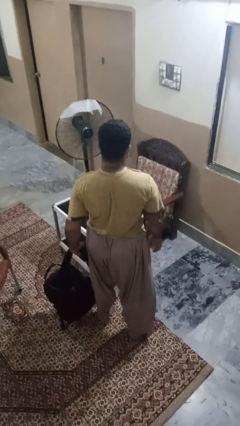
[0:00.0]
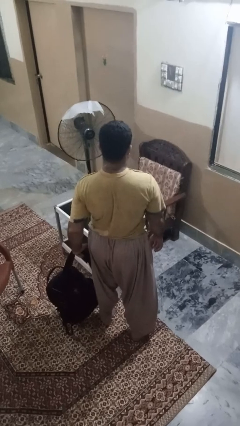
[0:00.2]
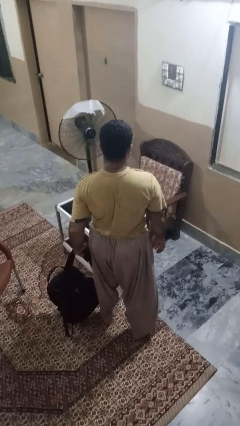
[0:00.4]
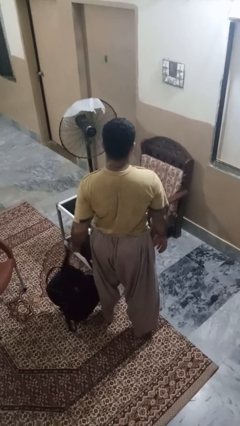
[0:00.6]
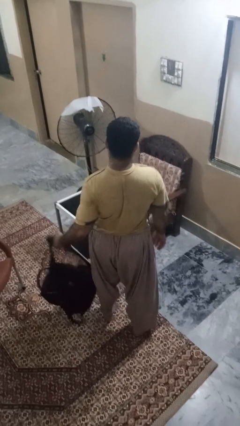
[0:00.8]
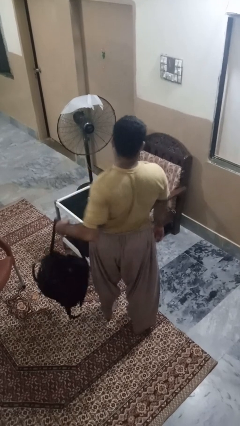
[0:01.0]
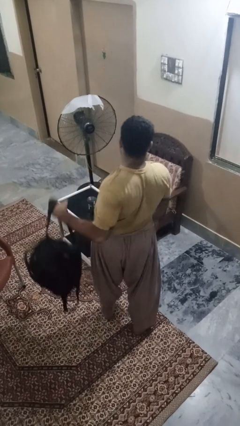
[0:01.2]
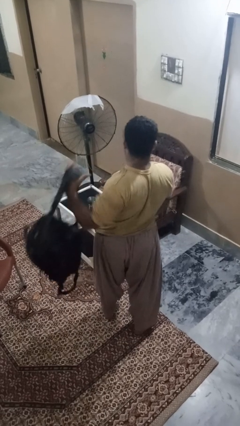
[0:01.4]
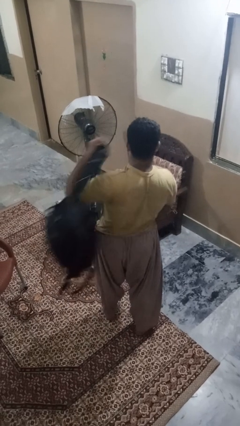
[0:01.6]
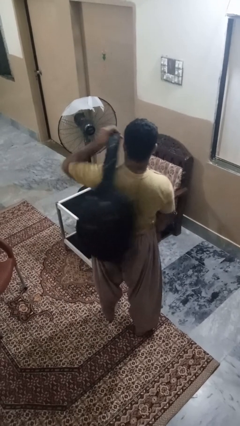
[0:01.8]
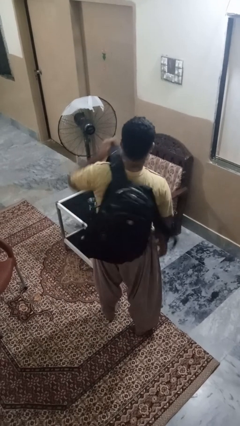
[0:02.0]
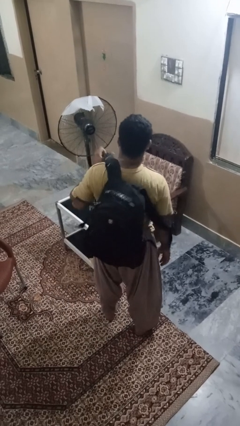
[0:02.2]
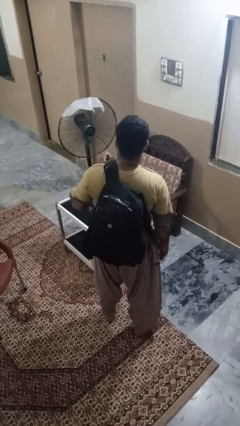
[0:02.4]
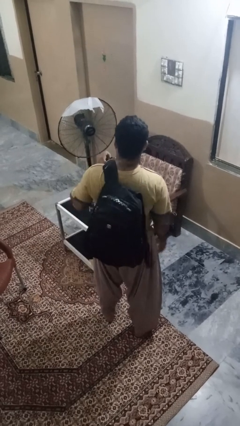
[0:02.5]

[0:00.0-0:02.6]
person puts on backpack

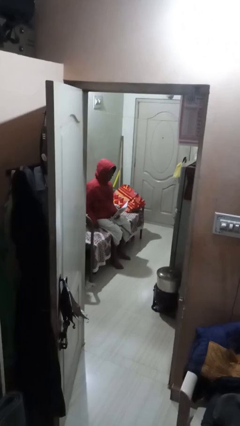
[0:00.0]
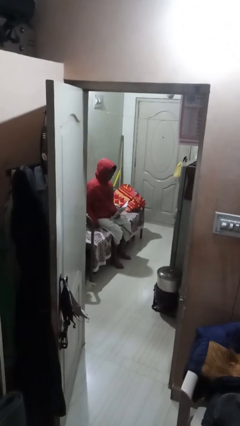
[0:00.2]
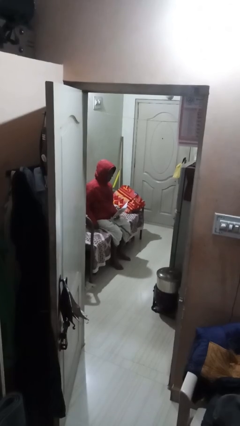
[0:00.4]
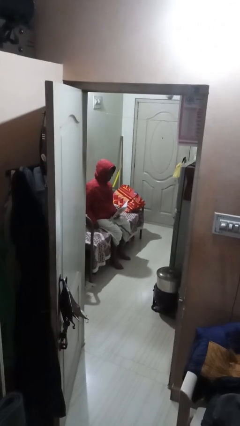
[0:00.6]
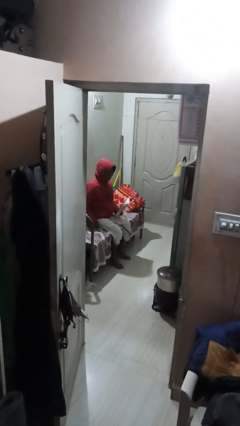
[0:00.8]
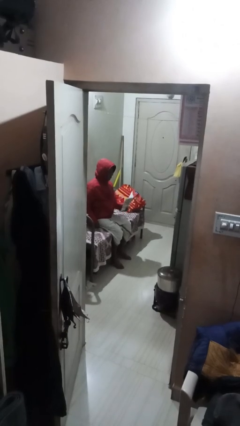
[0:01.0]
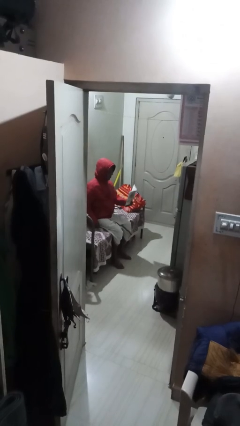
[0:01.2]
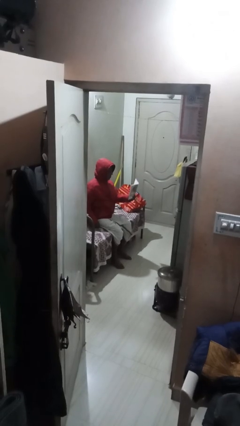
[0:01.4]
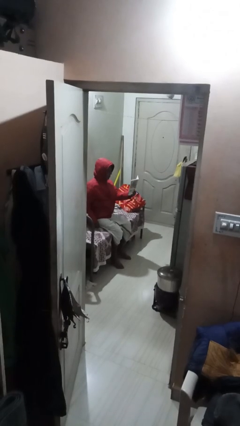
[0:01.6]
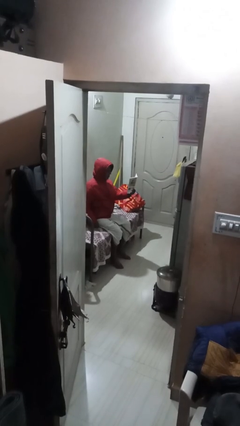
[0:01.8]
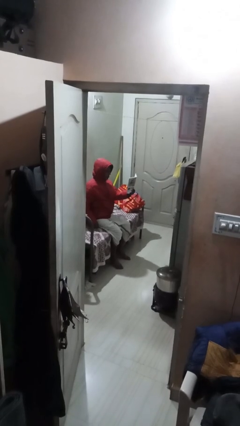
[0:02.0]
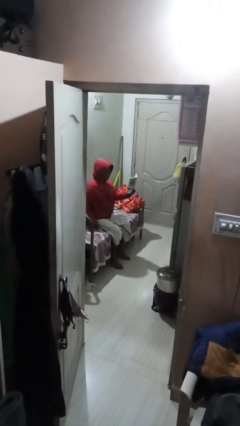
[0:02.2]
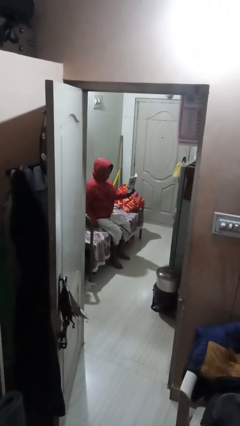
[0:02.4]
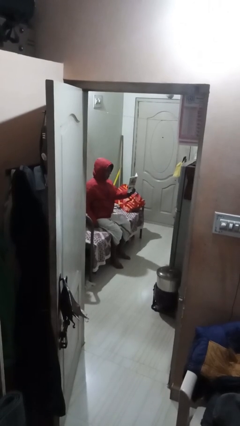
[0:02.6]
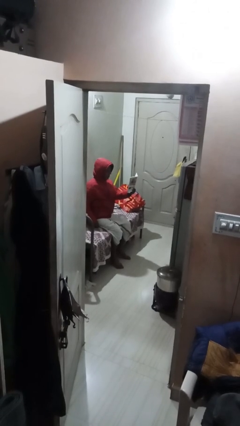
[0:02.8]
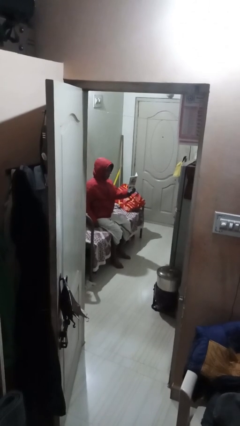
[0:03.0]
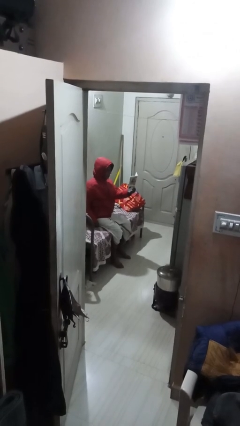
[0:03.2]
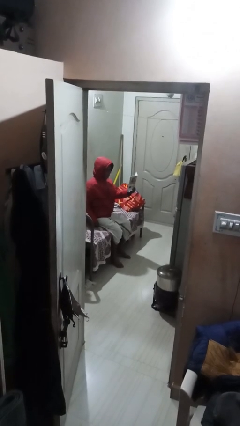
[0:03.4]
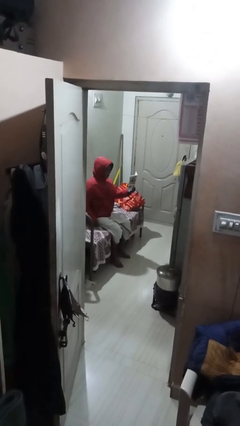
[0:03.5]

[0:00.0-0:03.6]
person reads document

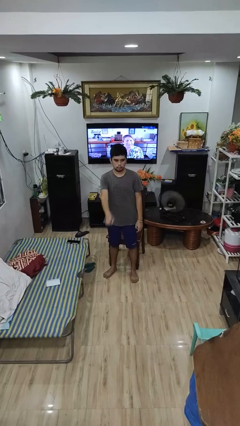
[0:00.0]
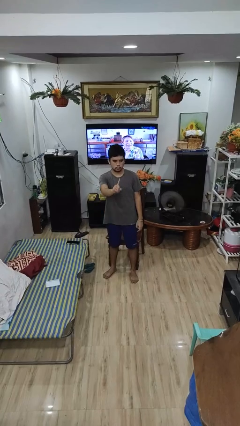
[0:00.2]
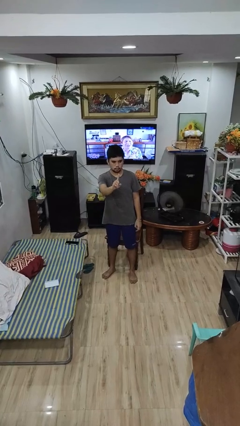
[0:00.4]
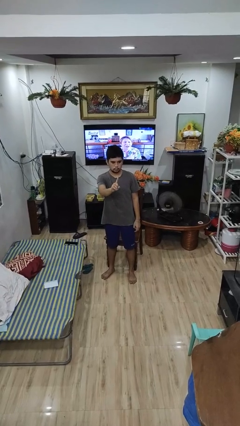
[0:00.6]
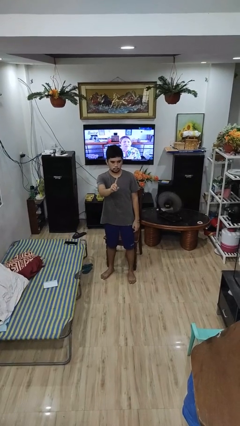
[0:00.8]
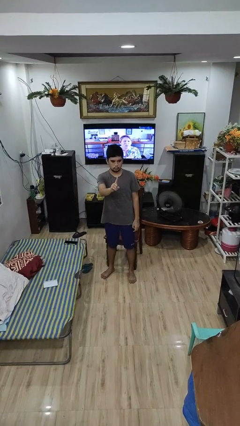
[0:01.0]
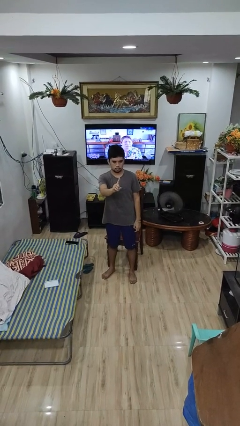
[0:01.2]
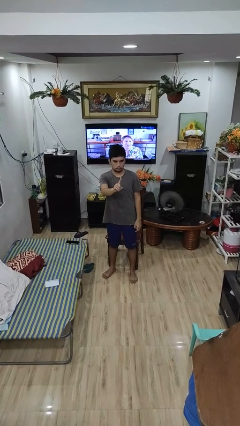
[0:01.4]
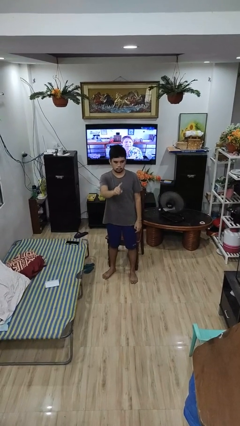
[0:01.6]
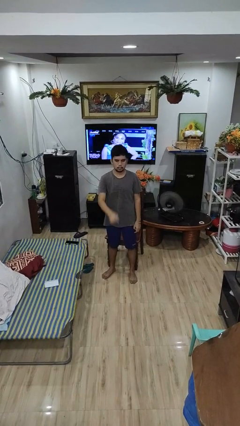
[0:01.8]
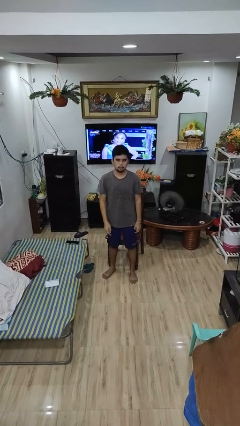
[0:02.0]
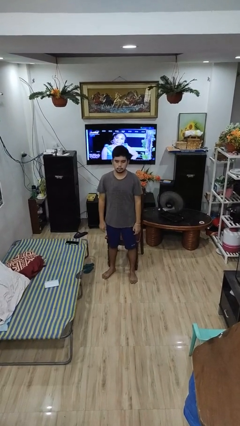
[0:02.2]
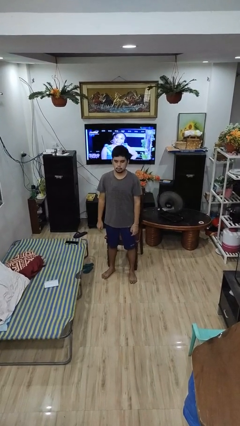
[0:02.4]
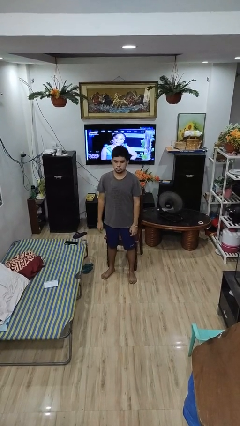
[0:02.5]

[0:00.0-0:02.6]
person gestures number one

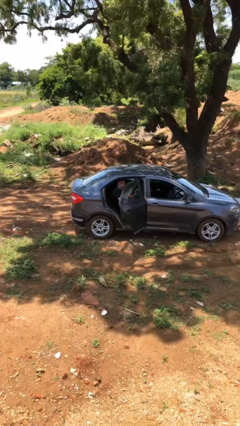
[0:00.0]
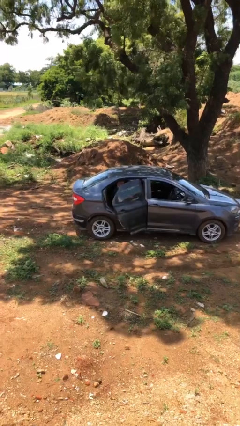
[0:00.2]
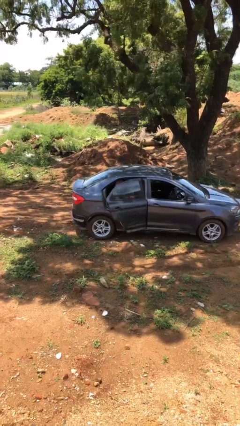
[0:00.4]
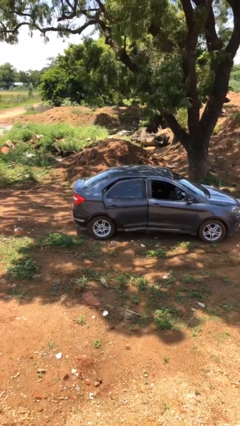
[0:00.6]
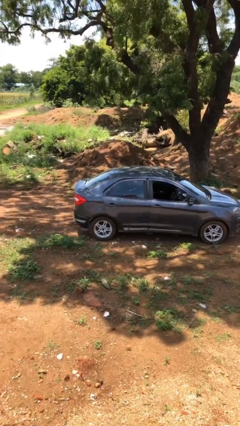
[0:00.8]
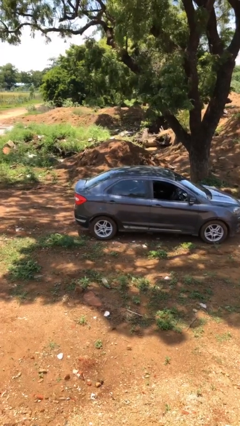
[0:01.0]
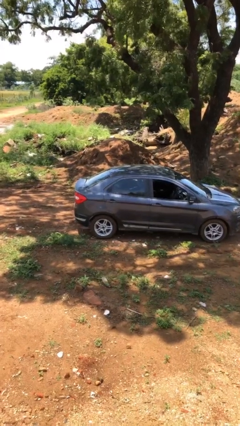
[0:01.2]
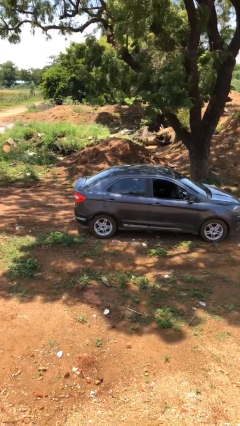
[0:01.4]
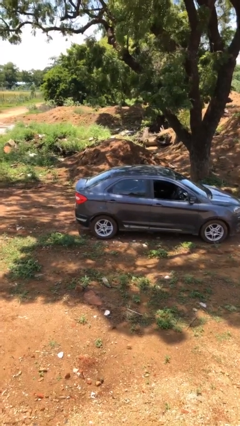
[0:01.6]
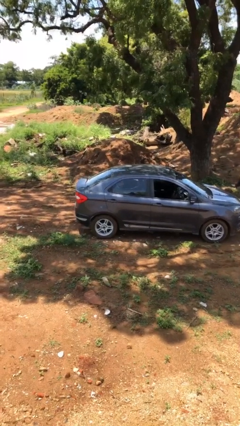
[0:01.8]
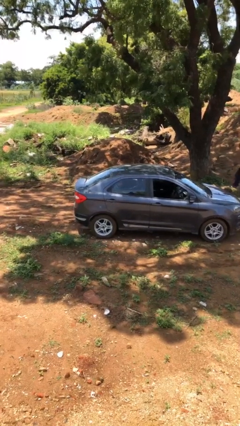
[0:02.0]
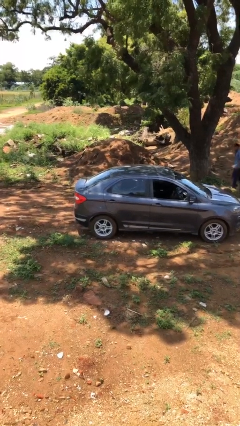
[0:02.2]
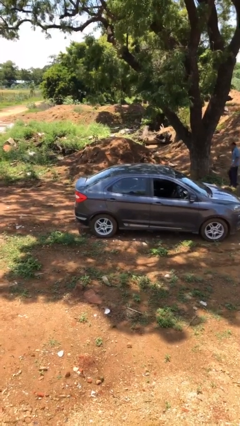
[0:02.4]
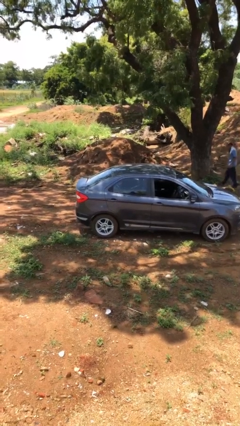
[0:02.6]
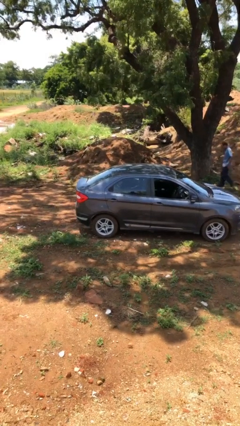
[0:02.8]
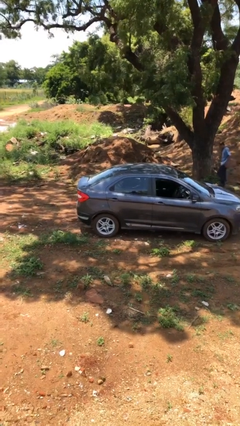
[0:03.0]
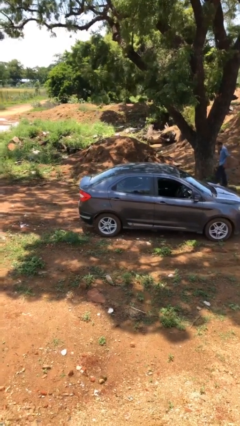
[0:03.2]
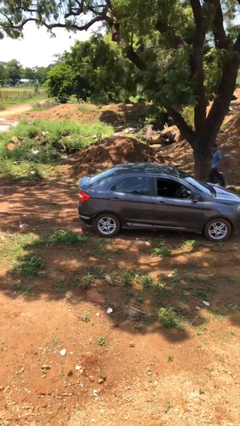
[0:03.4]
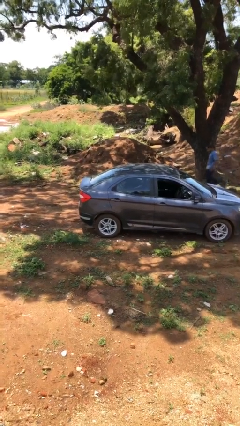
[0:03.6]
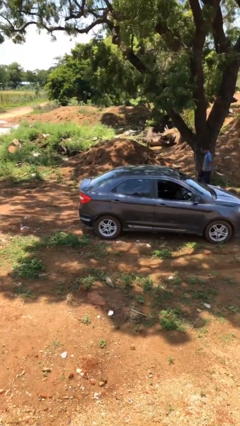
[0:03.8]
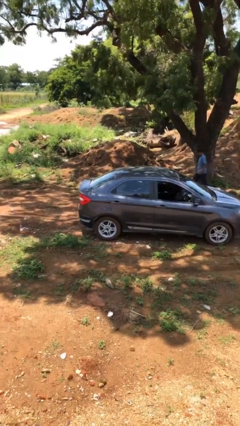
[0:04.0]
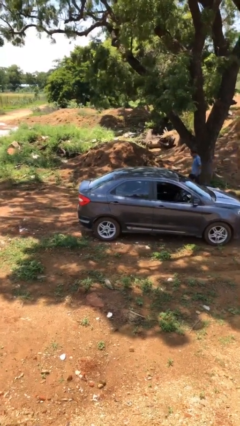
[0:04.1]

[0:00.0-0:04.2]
person closes car door

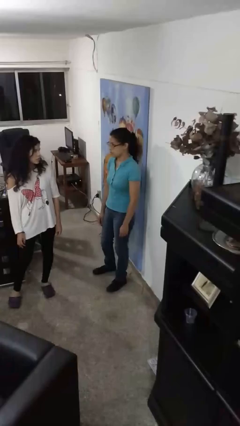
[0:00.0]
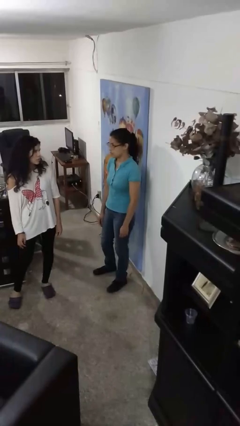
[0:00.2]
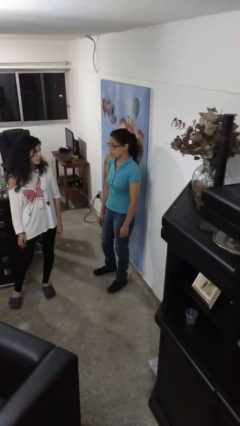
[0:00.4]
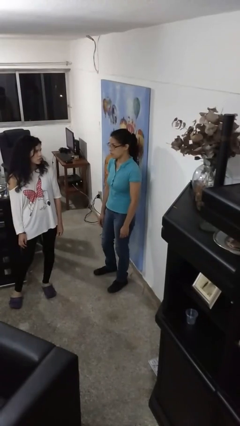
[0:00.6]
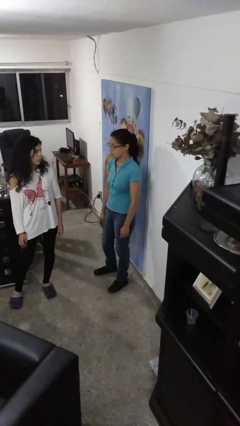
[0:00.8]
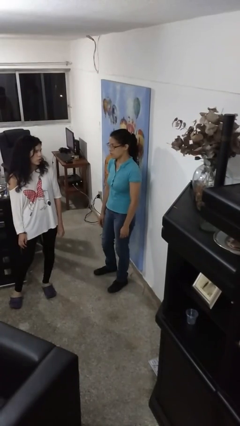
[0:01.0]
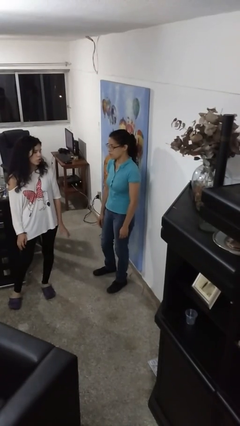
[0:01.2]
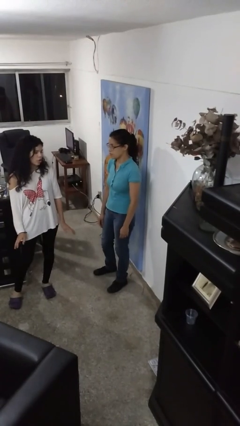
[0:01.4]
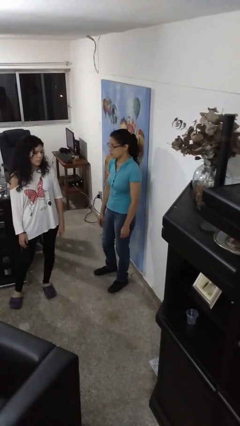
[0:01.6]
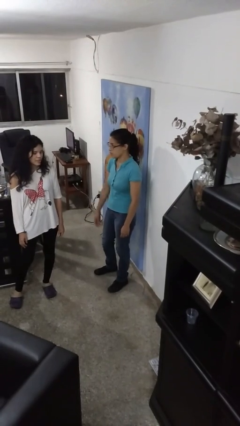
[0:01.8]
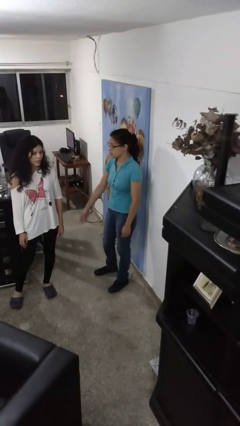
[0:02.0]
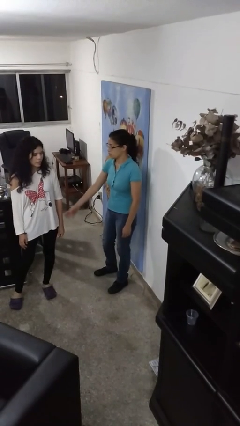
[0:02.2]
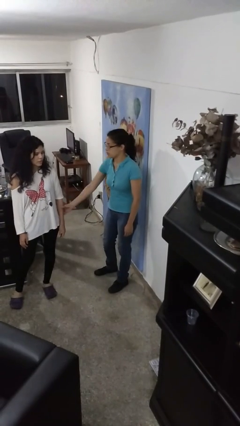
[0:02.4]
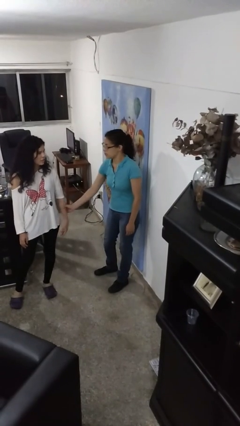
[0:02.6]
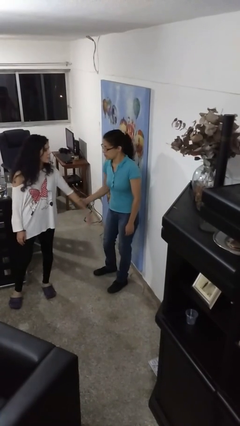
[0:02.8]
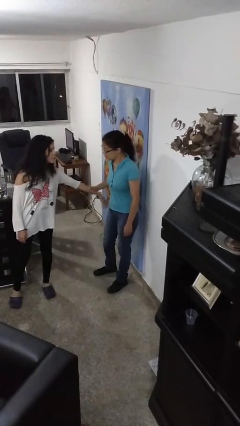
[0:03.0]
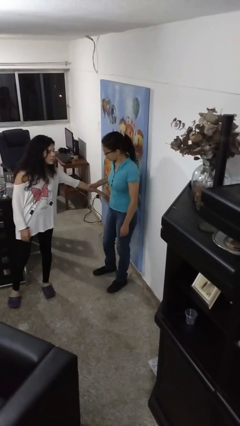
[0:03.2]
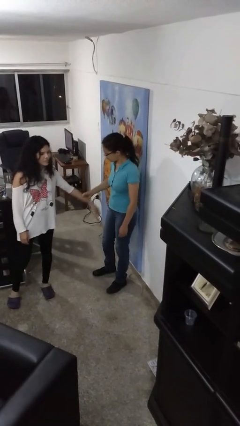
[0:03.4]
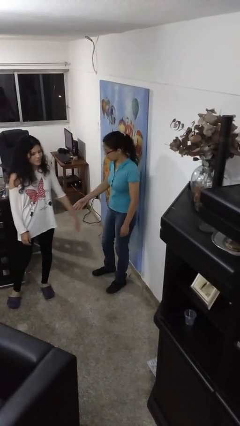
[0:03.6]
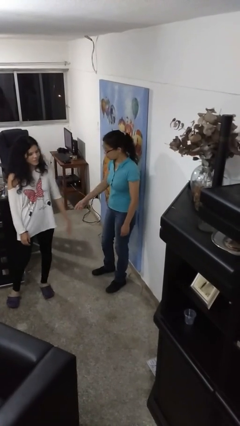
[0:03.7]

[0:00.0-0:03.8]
person grabs person by forearm

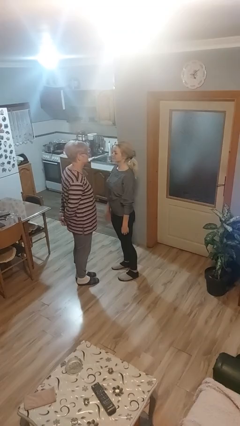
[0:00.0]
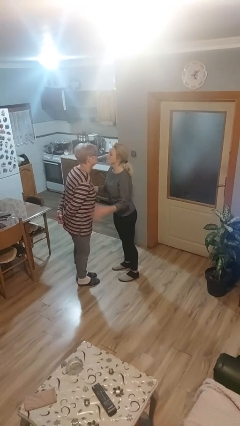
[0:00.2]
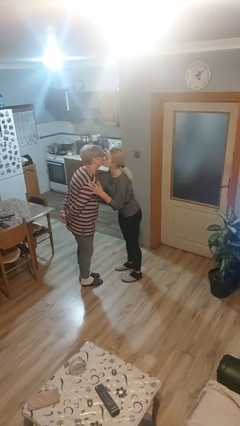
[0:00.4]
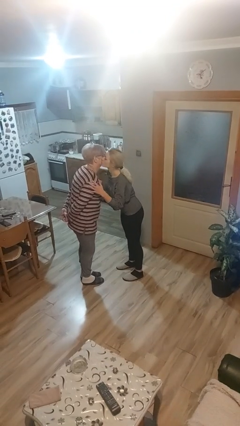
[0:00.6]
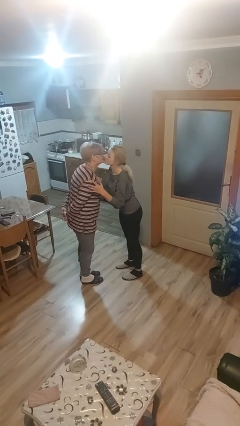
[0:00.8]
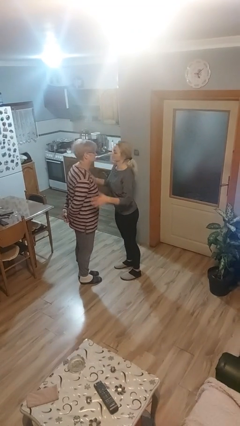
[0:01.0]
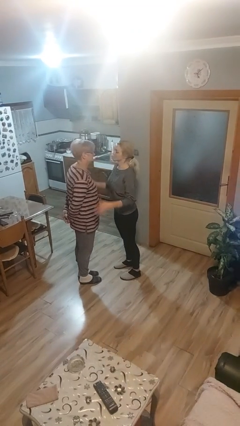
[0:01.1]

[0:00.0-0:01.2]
person kisses cheek of person
